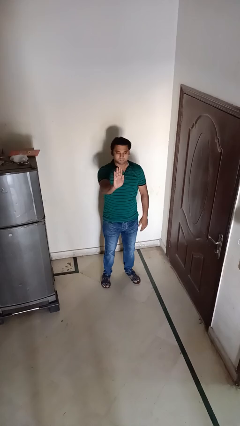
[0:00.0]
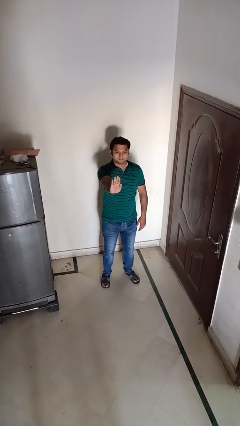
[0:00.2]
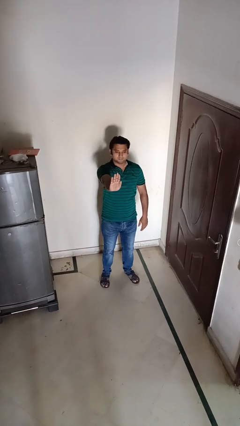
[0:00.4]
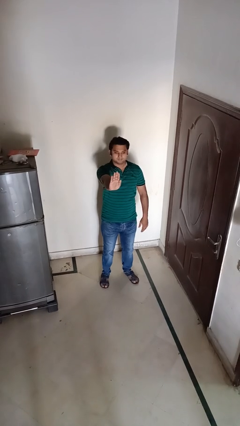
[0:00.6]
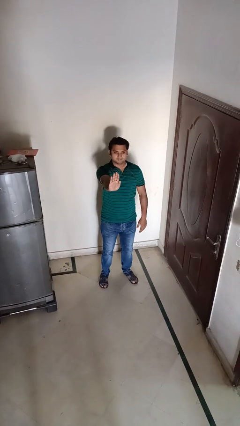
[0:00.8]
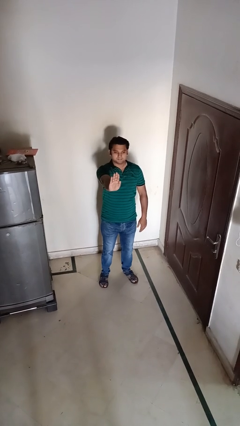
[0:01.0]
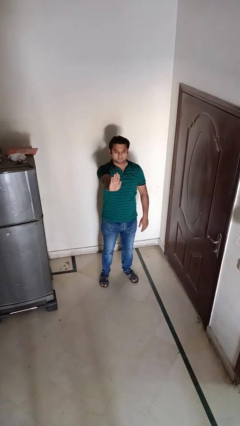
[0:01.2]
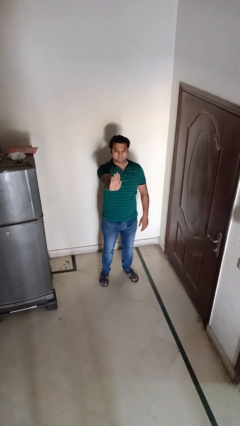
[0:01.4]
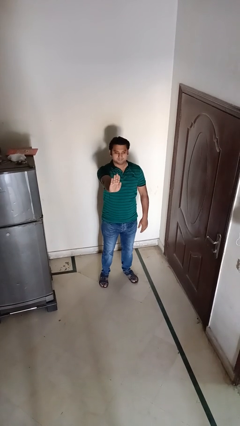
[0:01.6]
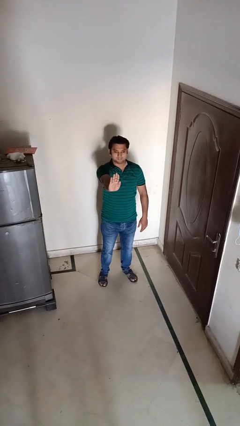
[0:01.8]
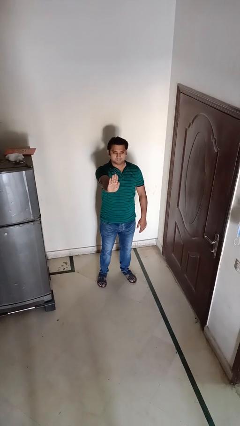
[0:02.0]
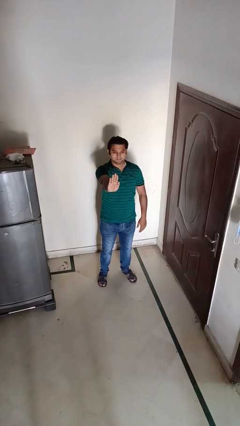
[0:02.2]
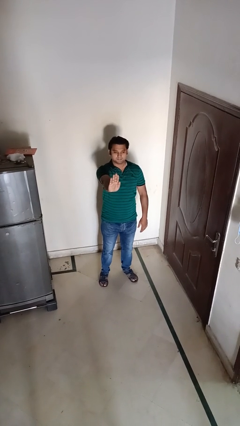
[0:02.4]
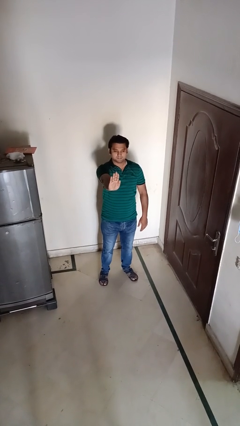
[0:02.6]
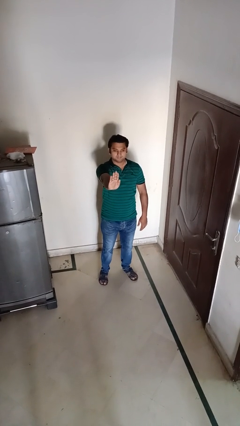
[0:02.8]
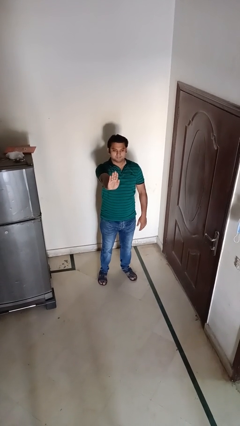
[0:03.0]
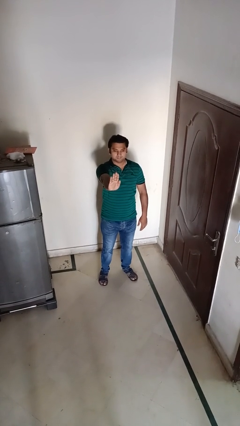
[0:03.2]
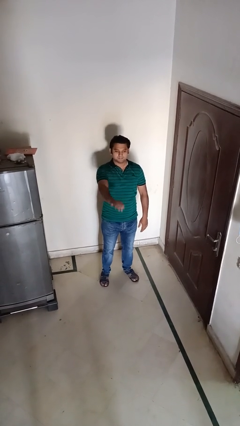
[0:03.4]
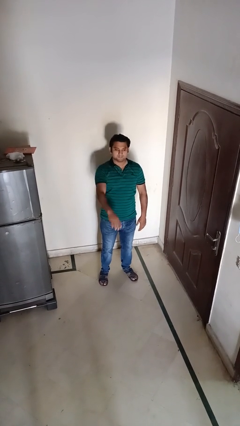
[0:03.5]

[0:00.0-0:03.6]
person gestures stop

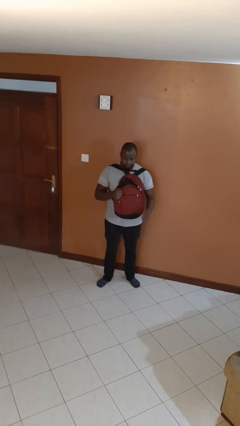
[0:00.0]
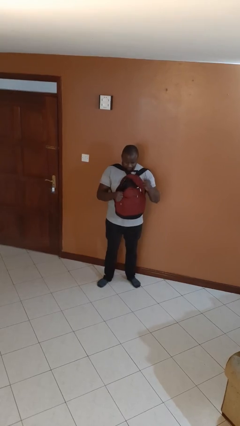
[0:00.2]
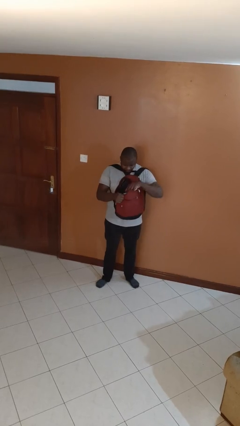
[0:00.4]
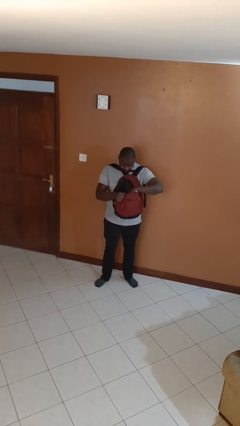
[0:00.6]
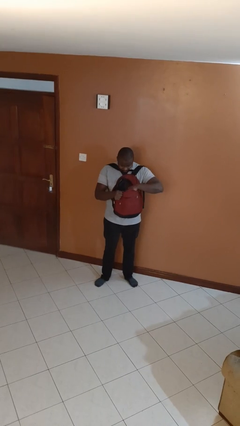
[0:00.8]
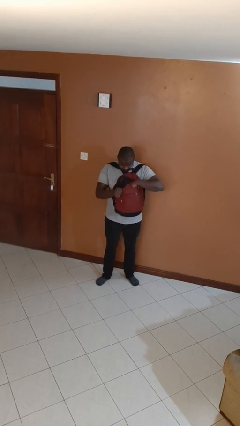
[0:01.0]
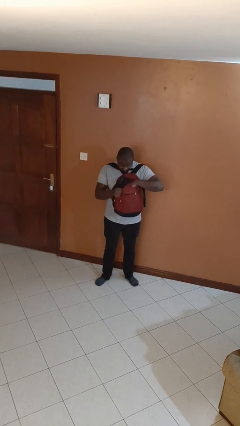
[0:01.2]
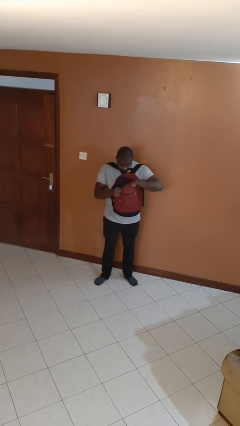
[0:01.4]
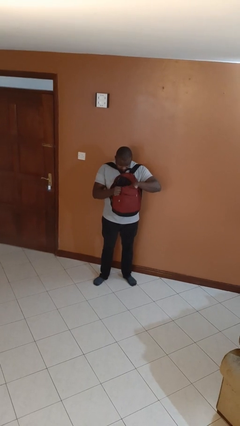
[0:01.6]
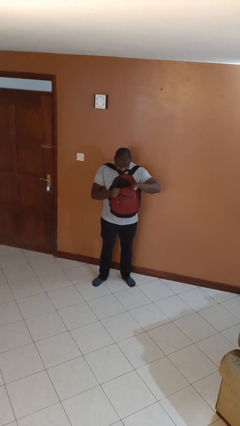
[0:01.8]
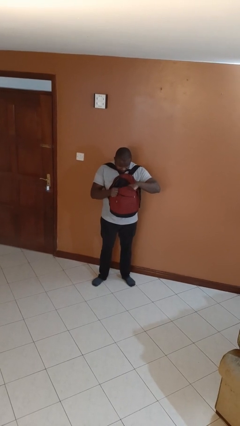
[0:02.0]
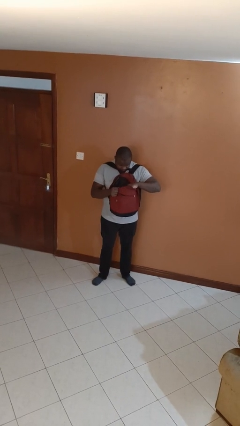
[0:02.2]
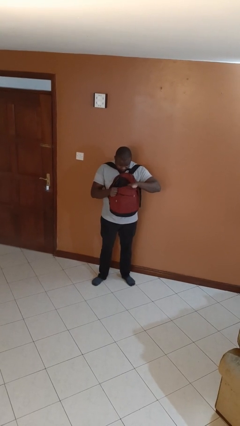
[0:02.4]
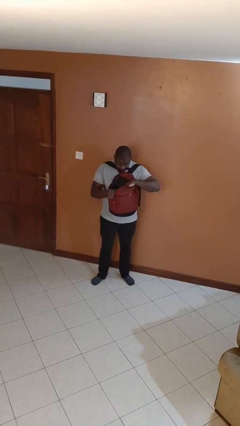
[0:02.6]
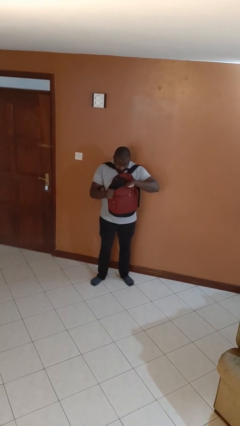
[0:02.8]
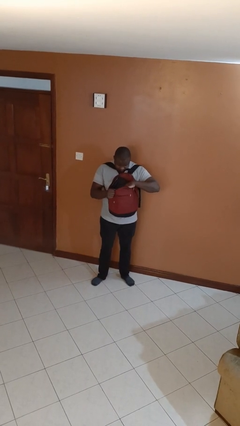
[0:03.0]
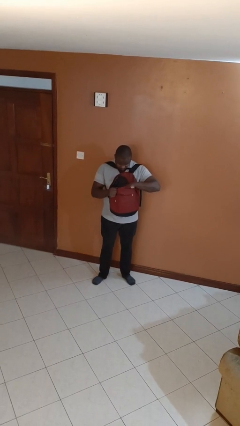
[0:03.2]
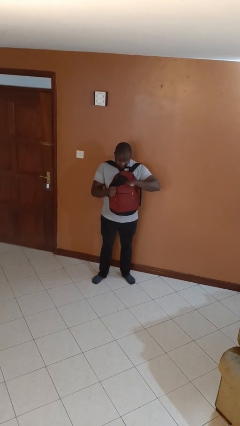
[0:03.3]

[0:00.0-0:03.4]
person searches in backpack

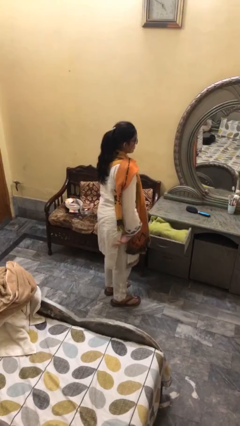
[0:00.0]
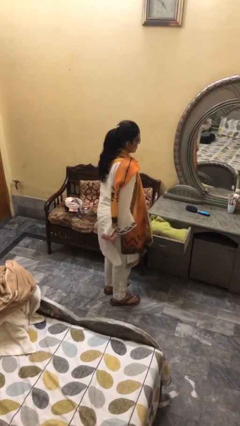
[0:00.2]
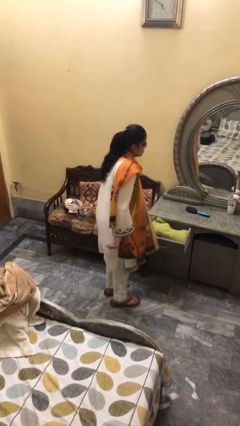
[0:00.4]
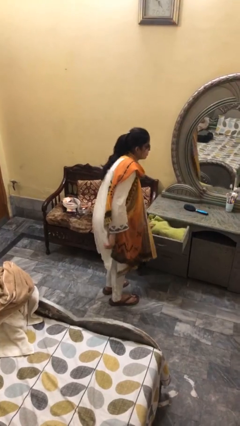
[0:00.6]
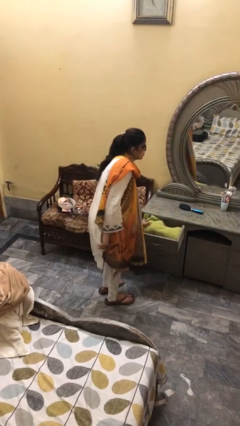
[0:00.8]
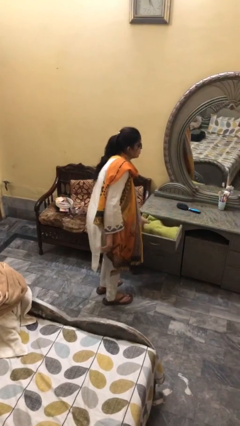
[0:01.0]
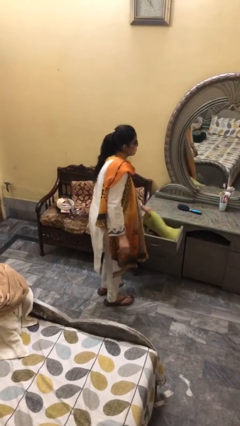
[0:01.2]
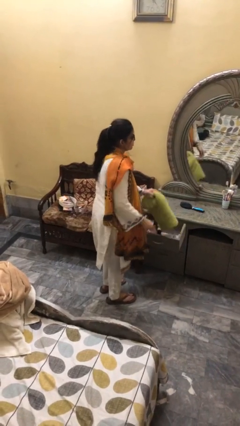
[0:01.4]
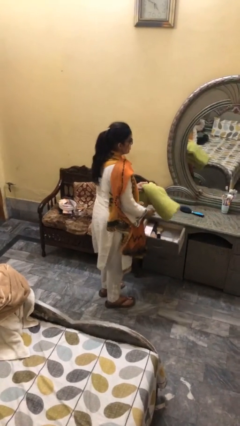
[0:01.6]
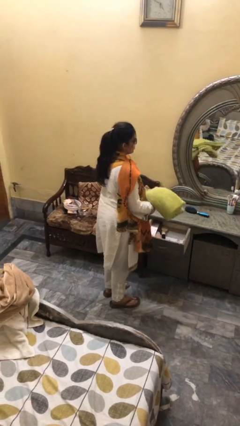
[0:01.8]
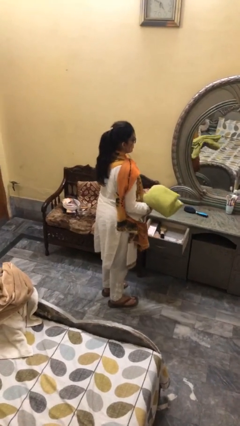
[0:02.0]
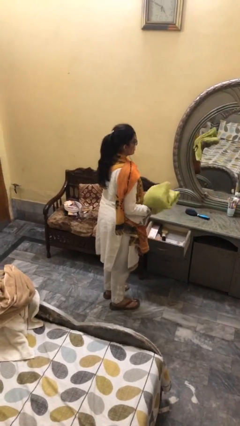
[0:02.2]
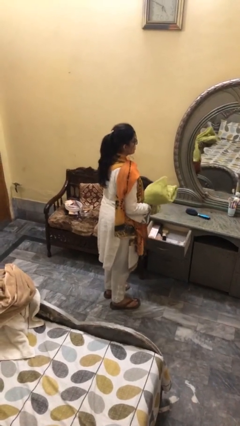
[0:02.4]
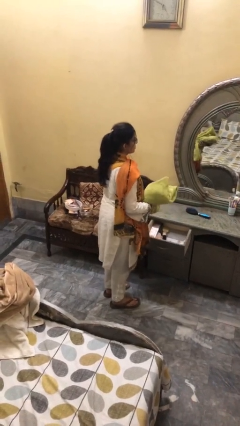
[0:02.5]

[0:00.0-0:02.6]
person takes clothes from dresser

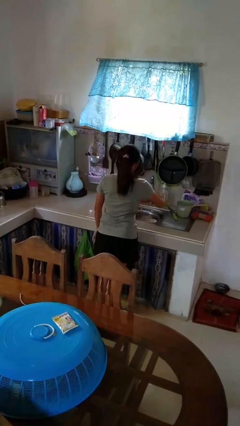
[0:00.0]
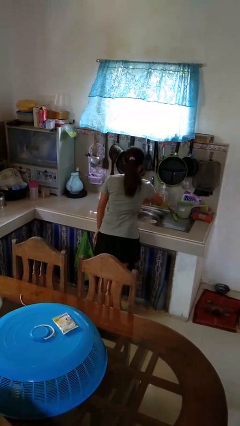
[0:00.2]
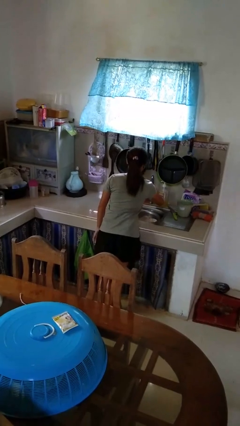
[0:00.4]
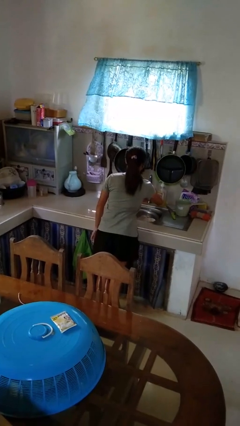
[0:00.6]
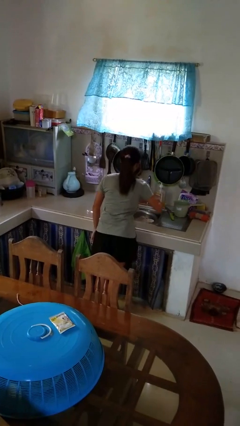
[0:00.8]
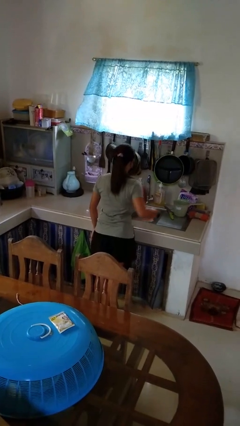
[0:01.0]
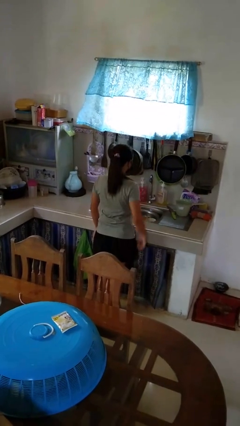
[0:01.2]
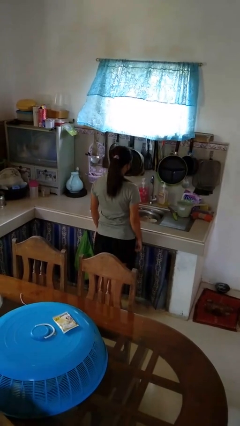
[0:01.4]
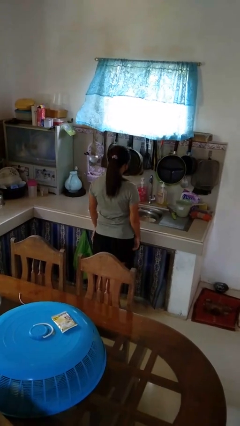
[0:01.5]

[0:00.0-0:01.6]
person turns off faucet

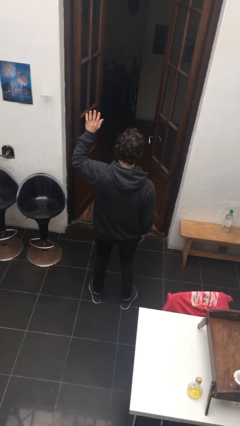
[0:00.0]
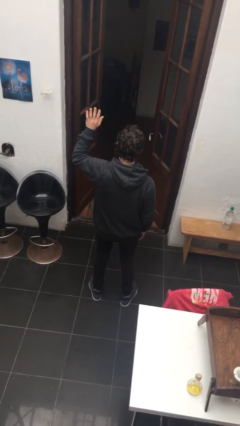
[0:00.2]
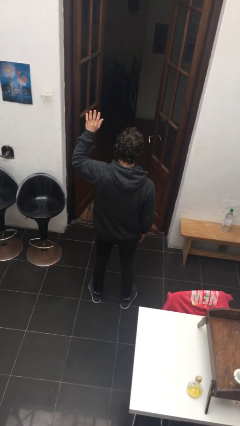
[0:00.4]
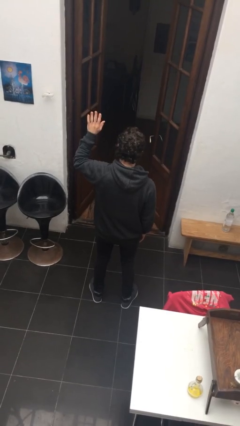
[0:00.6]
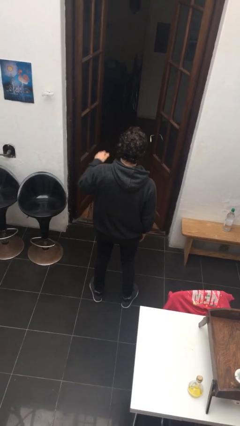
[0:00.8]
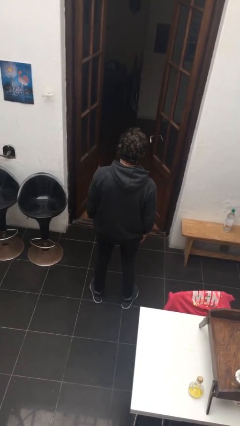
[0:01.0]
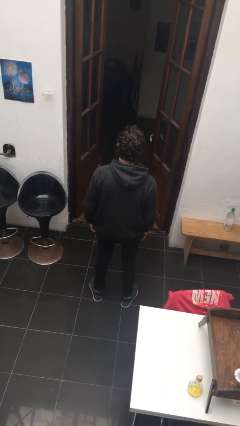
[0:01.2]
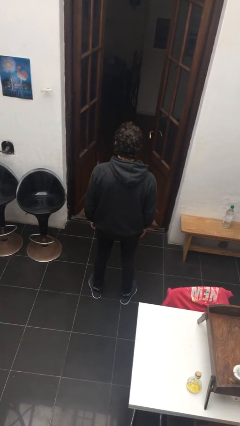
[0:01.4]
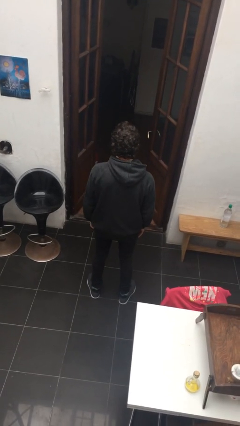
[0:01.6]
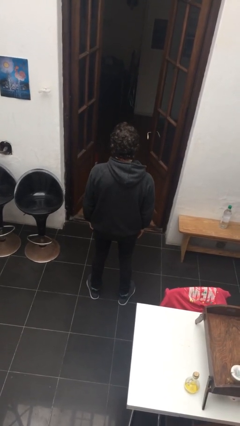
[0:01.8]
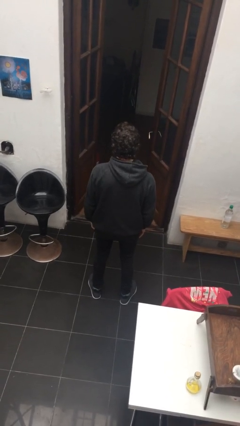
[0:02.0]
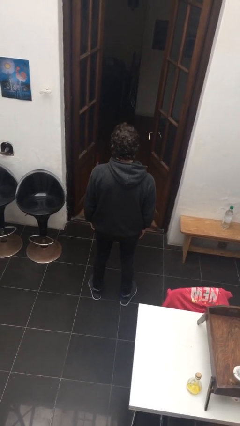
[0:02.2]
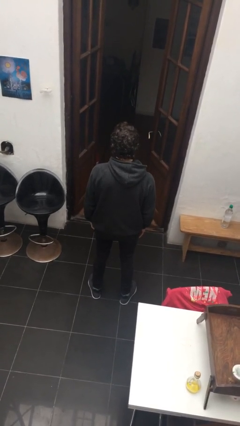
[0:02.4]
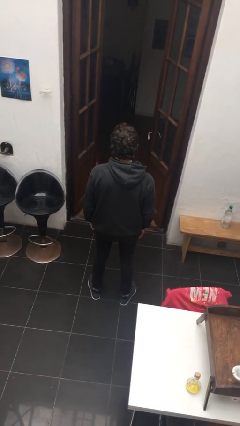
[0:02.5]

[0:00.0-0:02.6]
person gestures lower hand

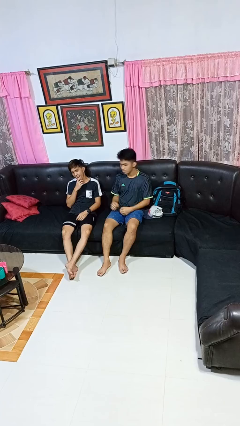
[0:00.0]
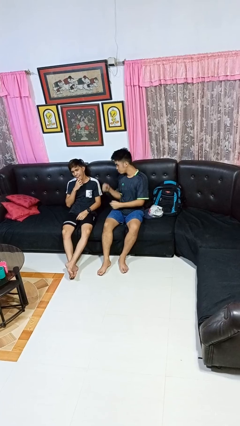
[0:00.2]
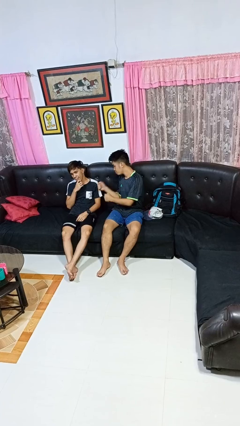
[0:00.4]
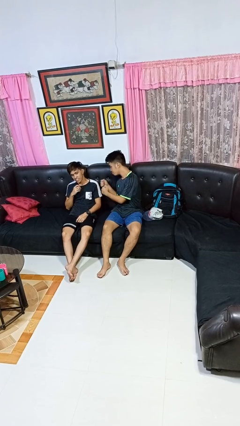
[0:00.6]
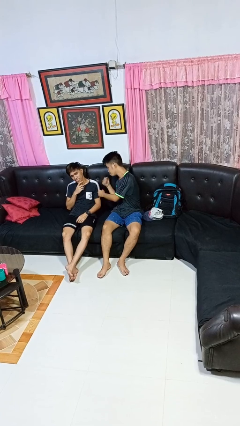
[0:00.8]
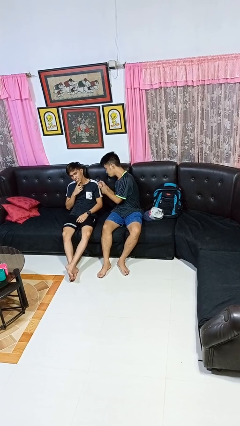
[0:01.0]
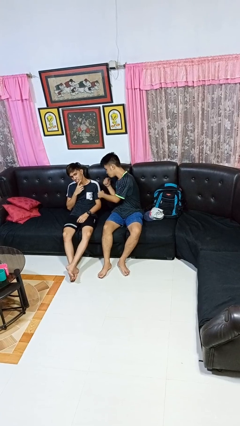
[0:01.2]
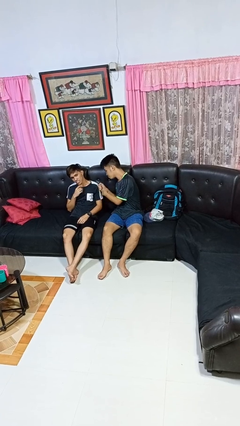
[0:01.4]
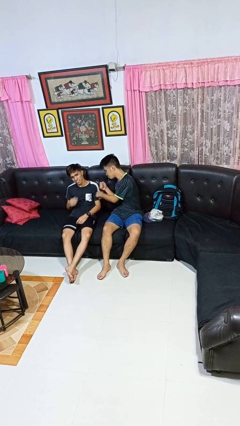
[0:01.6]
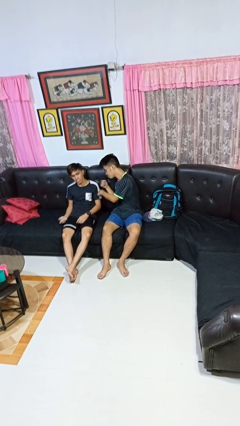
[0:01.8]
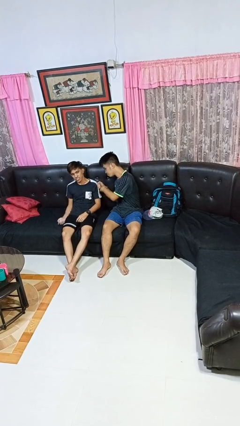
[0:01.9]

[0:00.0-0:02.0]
person pounds shoulders of person

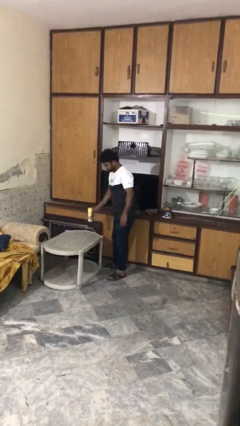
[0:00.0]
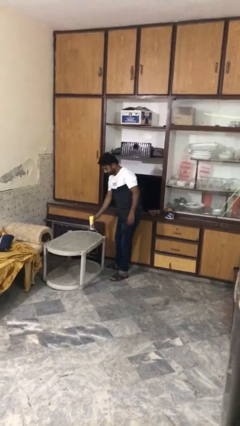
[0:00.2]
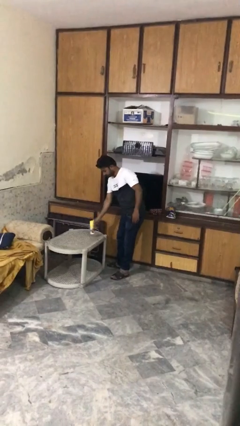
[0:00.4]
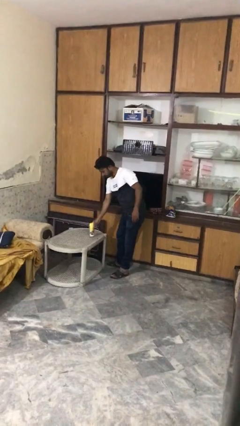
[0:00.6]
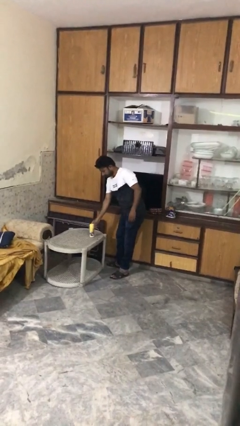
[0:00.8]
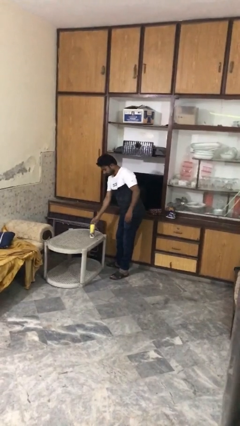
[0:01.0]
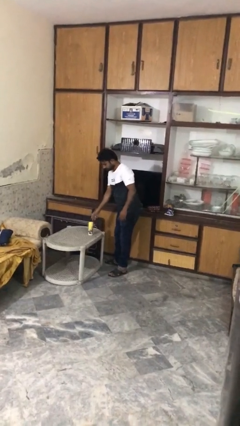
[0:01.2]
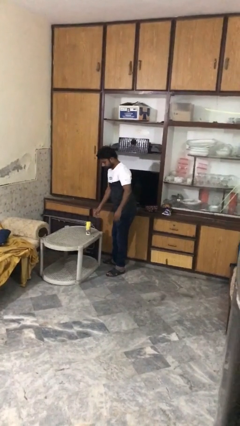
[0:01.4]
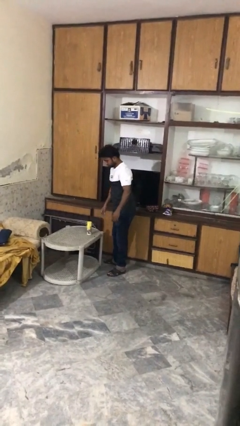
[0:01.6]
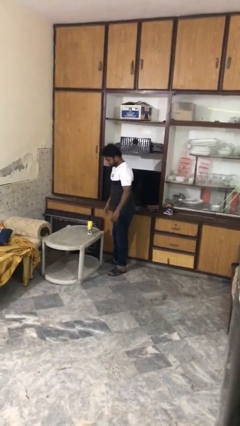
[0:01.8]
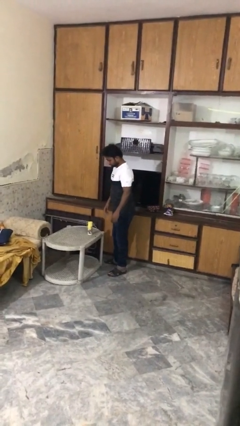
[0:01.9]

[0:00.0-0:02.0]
person puts down object on table
